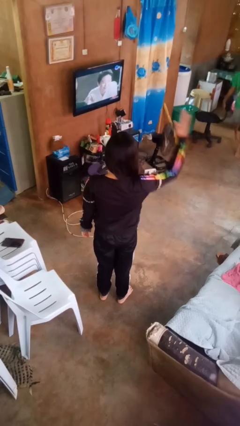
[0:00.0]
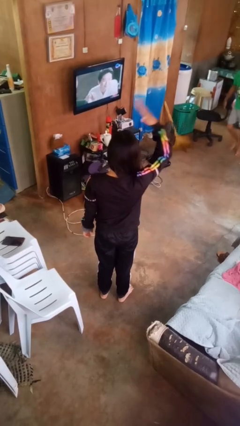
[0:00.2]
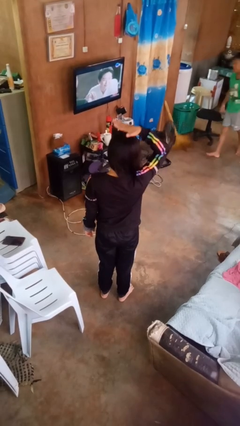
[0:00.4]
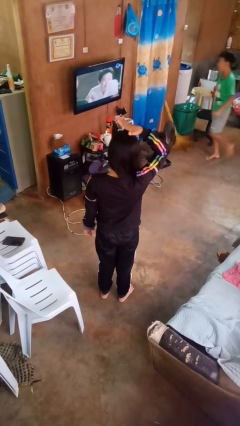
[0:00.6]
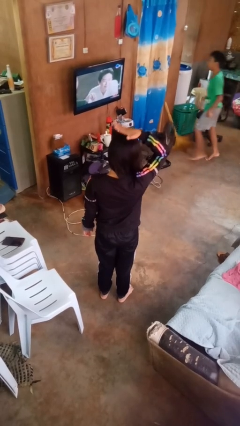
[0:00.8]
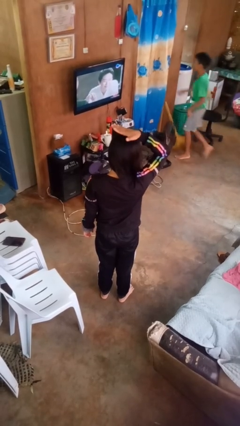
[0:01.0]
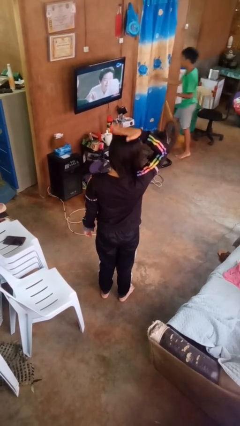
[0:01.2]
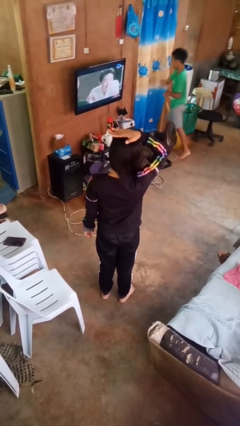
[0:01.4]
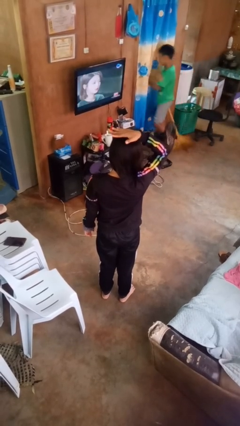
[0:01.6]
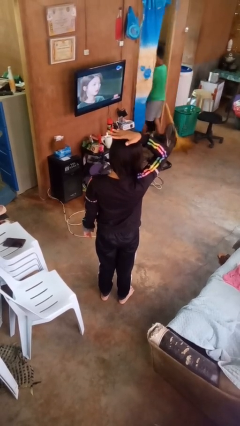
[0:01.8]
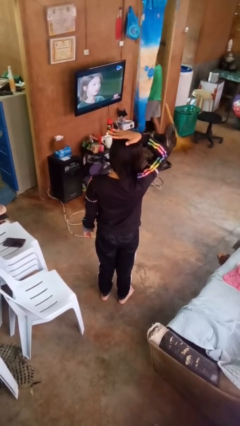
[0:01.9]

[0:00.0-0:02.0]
person pats head

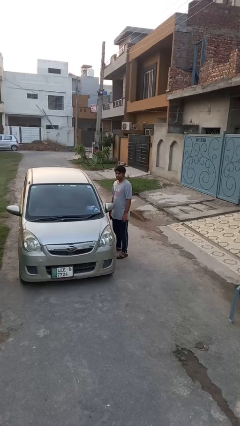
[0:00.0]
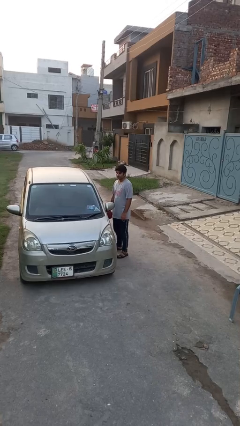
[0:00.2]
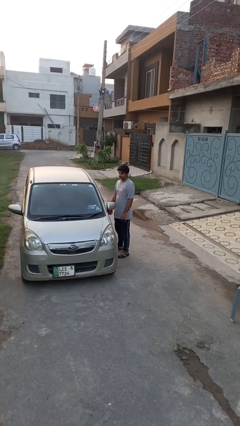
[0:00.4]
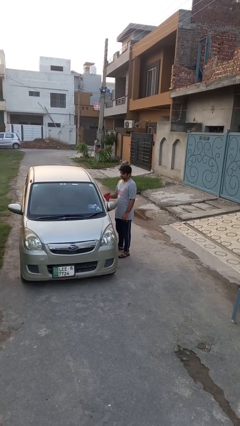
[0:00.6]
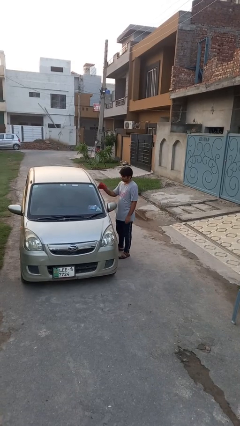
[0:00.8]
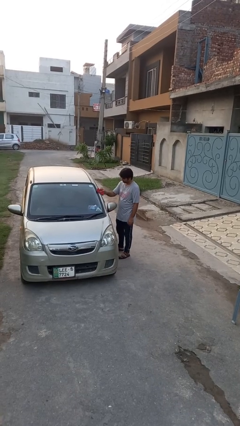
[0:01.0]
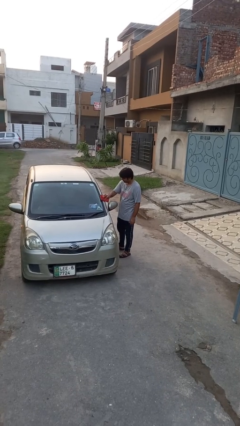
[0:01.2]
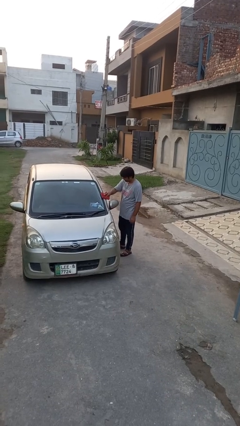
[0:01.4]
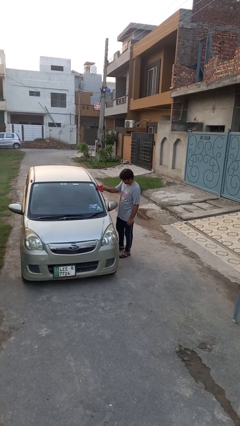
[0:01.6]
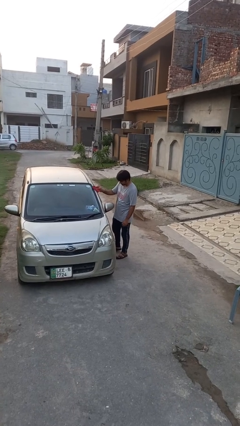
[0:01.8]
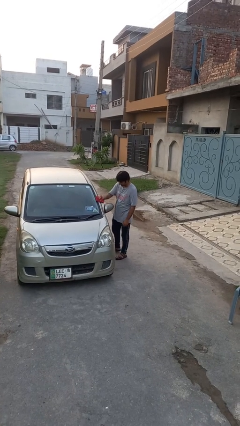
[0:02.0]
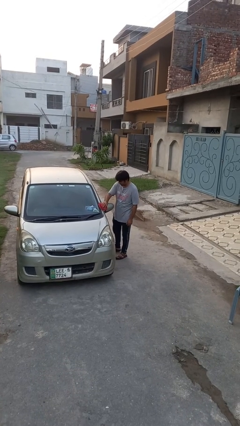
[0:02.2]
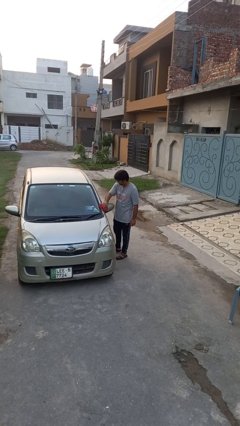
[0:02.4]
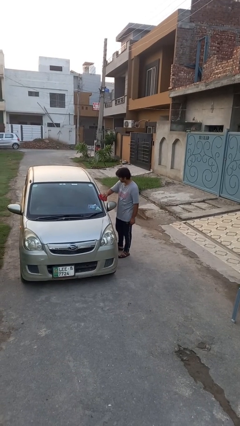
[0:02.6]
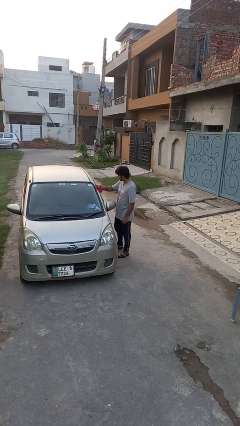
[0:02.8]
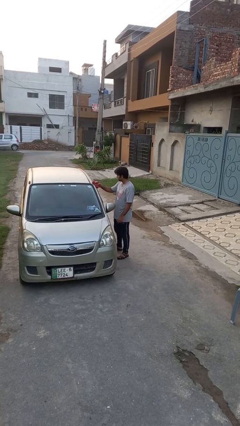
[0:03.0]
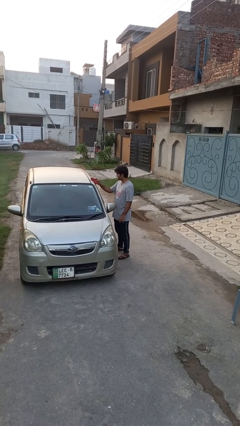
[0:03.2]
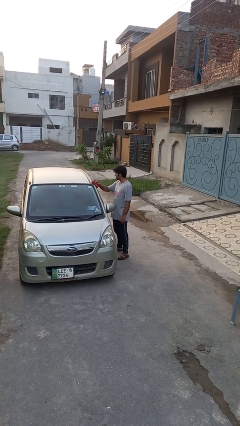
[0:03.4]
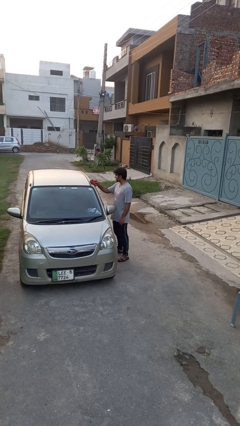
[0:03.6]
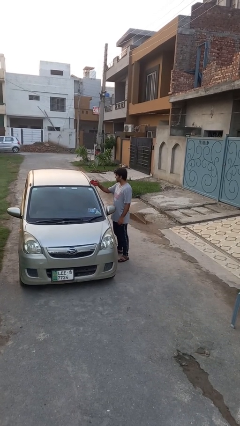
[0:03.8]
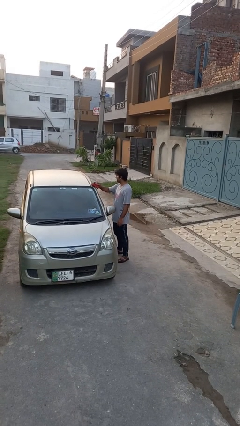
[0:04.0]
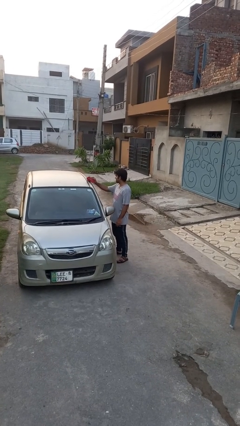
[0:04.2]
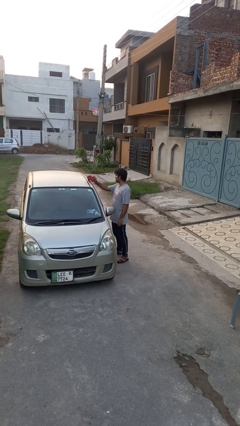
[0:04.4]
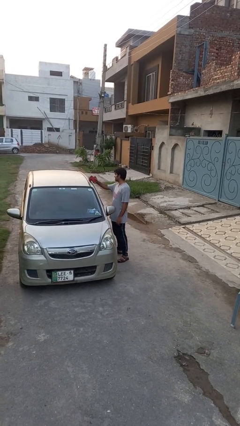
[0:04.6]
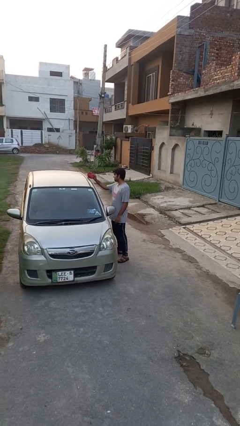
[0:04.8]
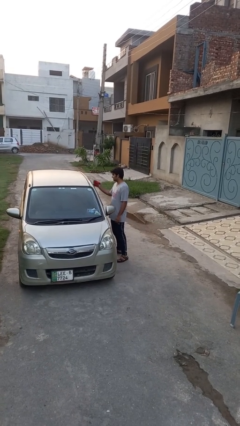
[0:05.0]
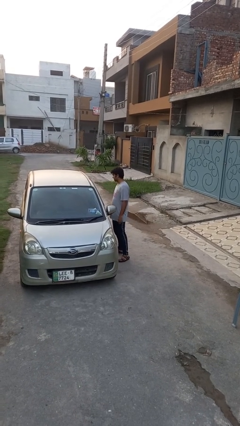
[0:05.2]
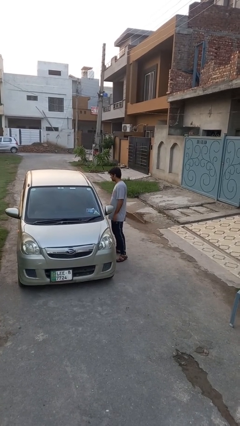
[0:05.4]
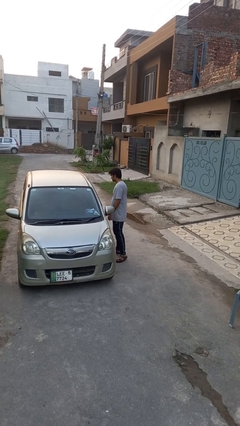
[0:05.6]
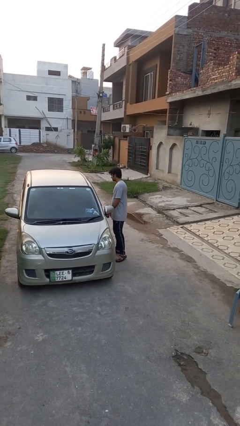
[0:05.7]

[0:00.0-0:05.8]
person polishes car with rag

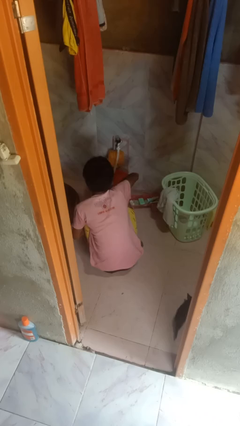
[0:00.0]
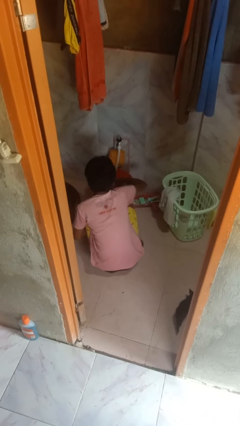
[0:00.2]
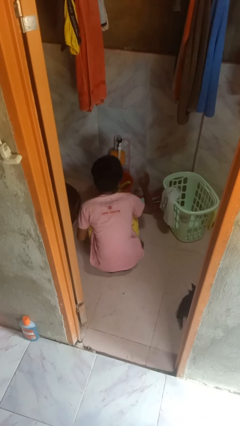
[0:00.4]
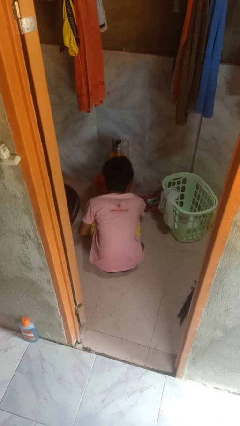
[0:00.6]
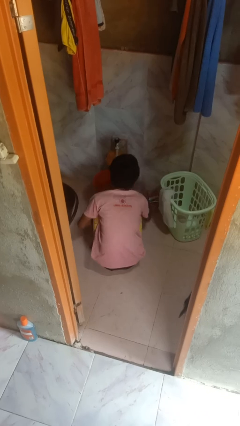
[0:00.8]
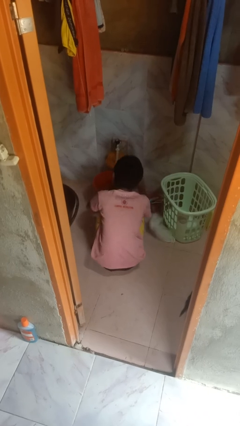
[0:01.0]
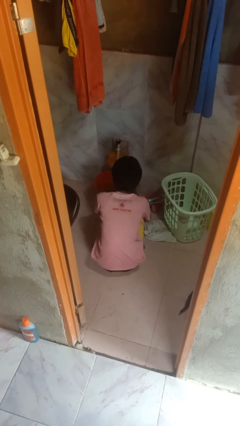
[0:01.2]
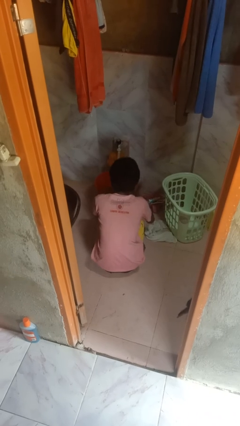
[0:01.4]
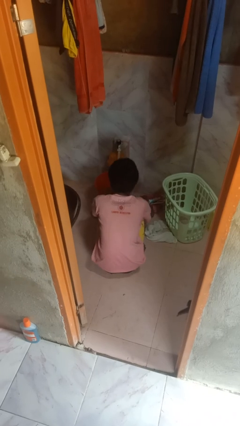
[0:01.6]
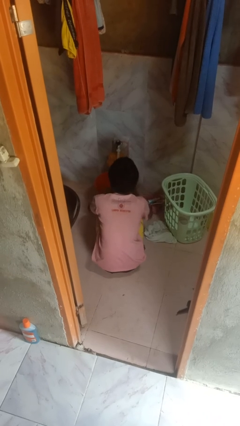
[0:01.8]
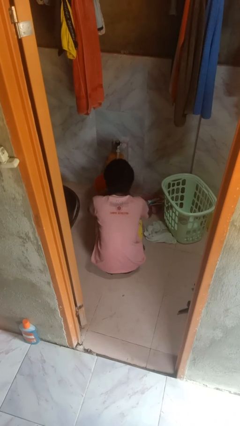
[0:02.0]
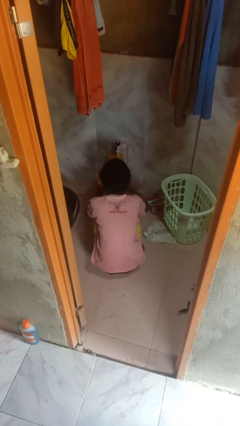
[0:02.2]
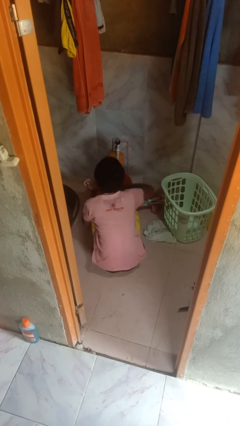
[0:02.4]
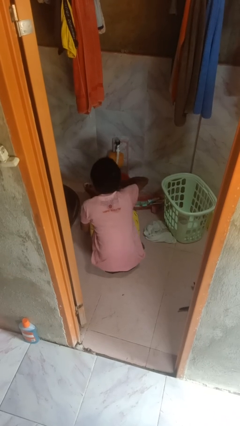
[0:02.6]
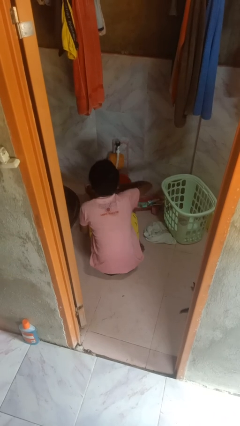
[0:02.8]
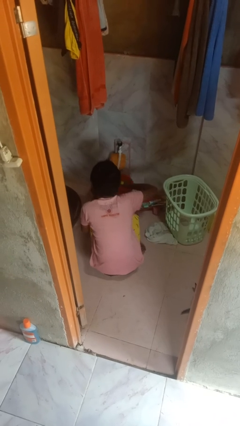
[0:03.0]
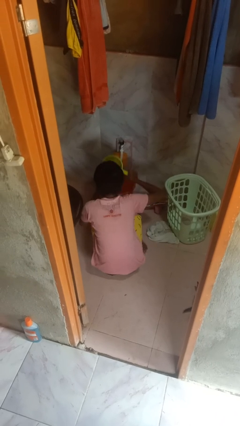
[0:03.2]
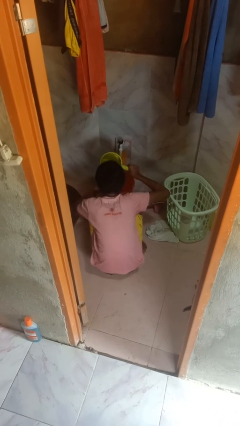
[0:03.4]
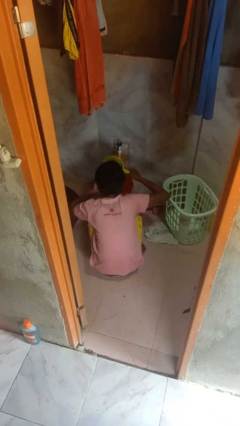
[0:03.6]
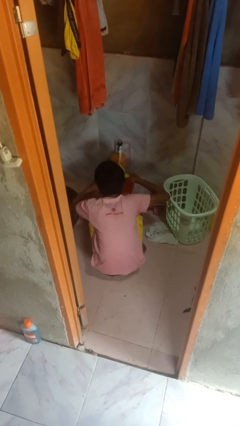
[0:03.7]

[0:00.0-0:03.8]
person washes face

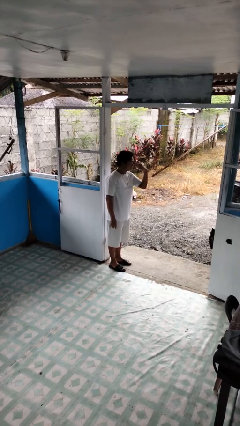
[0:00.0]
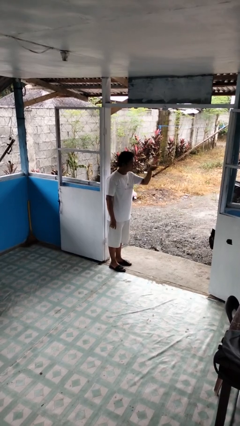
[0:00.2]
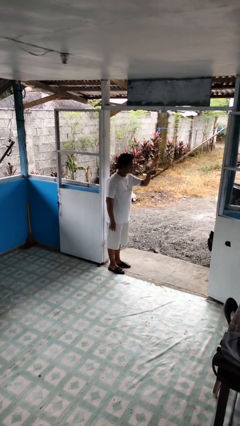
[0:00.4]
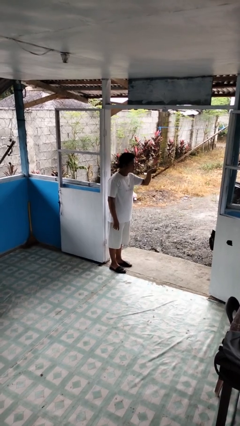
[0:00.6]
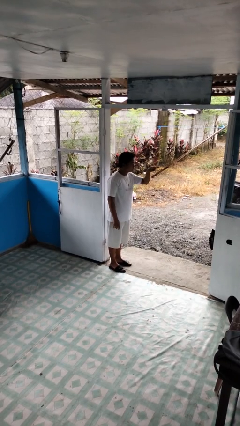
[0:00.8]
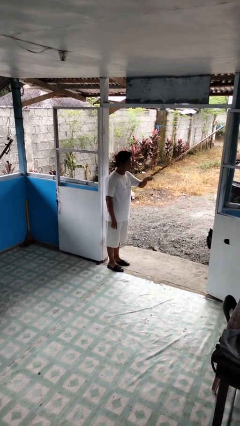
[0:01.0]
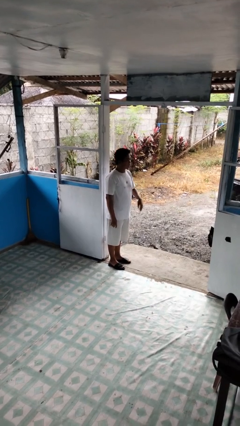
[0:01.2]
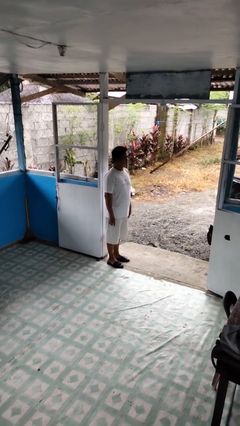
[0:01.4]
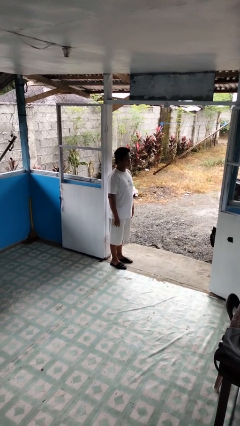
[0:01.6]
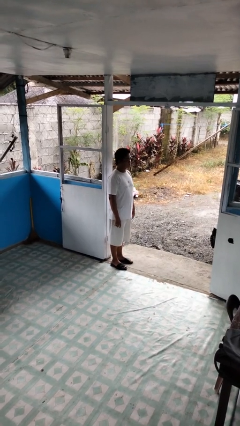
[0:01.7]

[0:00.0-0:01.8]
person gestures watch closely

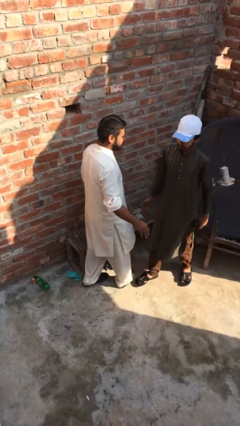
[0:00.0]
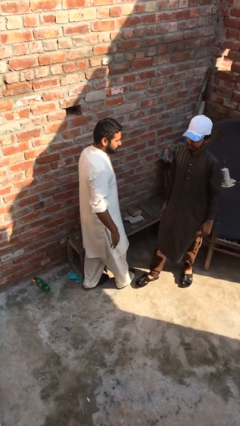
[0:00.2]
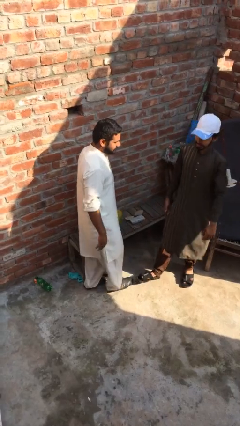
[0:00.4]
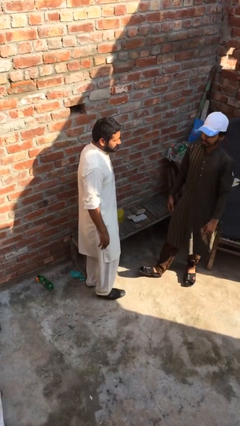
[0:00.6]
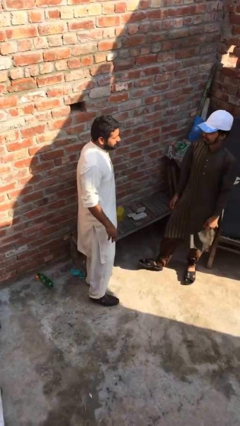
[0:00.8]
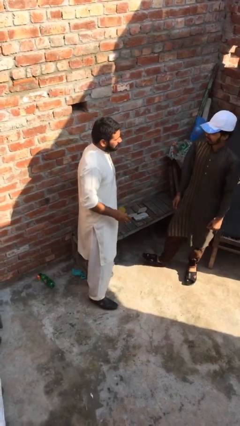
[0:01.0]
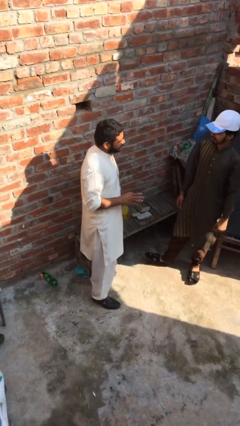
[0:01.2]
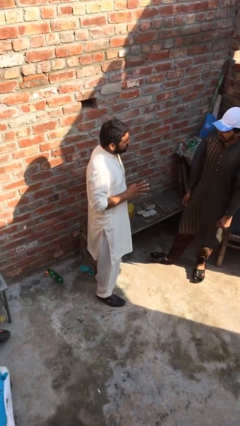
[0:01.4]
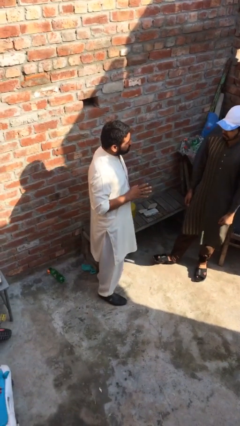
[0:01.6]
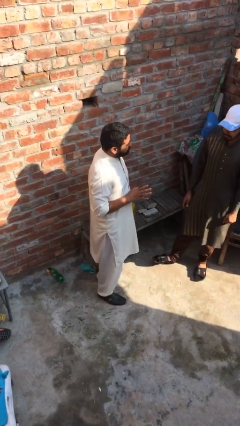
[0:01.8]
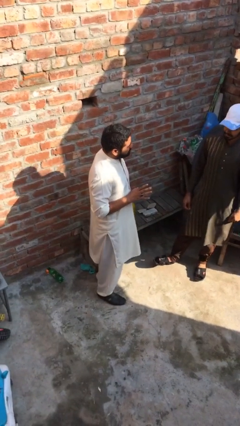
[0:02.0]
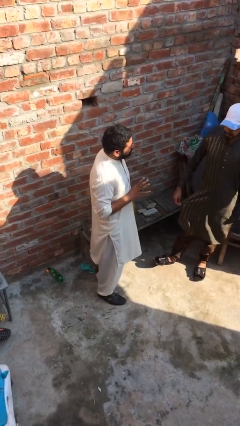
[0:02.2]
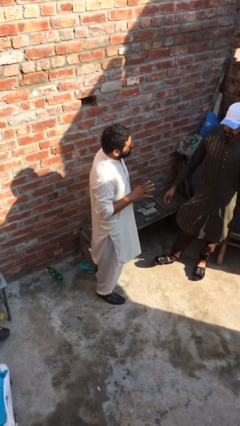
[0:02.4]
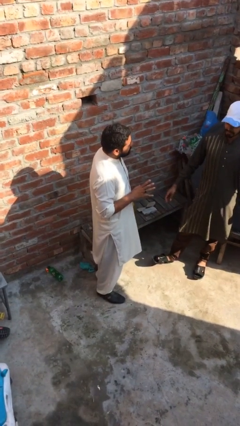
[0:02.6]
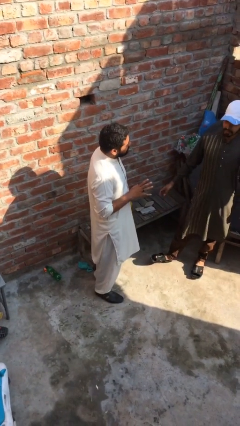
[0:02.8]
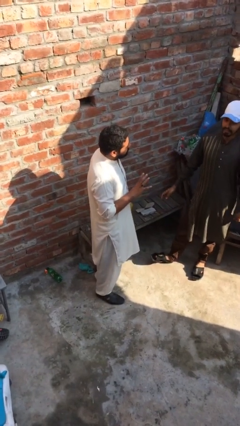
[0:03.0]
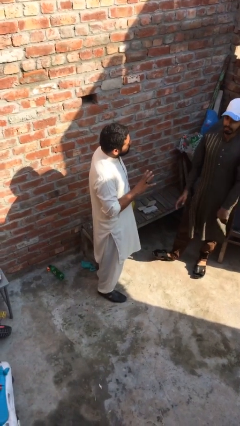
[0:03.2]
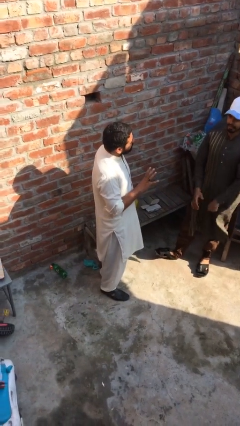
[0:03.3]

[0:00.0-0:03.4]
person talks to person

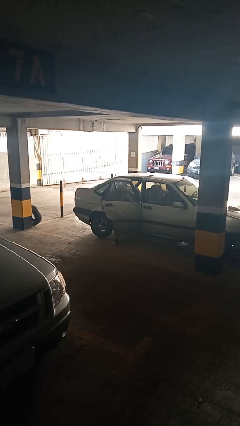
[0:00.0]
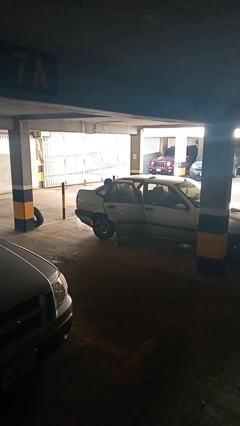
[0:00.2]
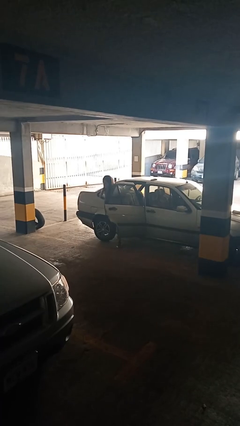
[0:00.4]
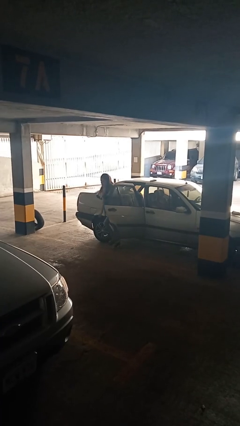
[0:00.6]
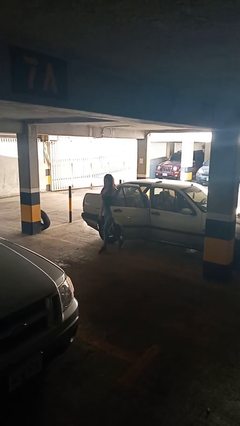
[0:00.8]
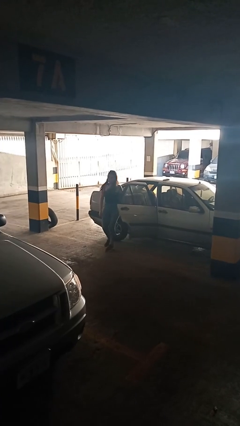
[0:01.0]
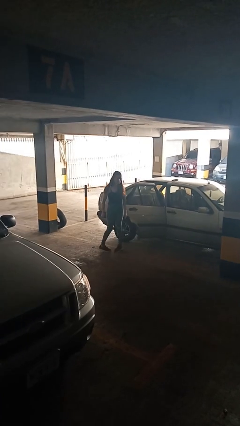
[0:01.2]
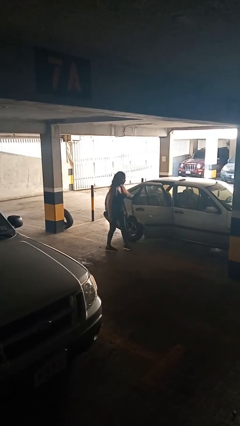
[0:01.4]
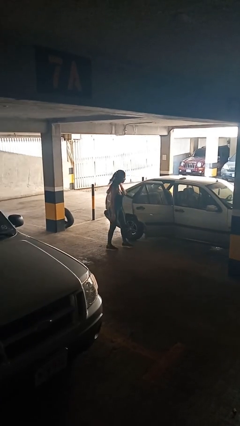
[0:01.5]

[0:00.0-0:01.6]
person exits car
